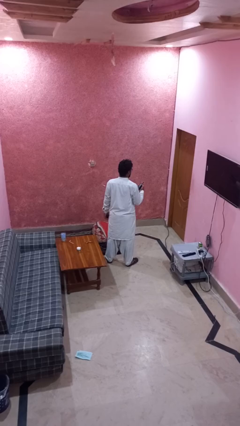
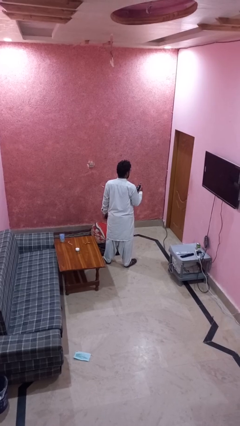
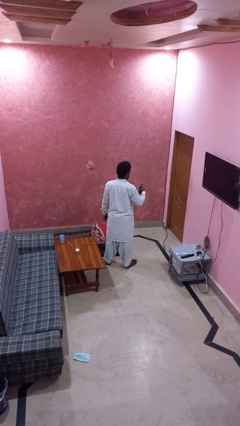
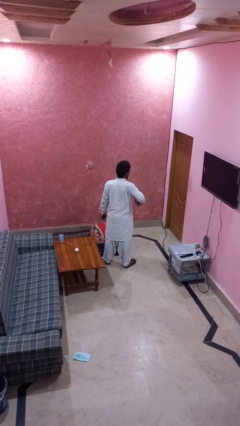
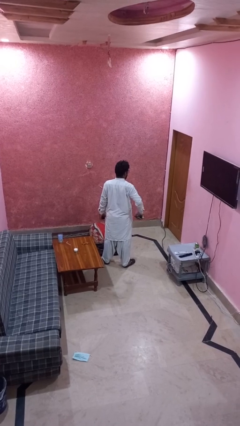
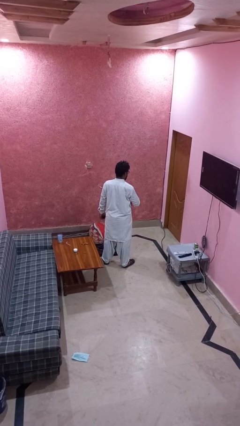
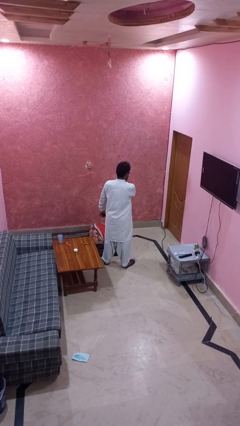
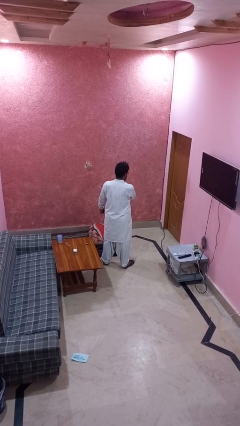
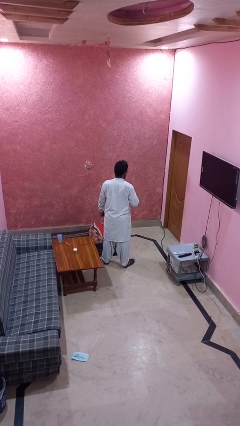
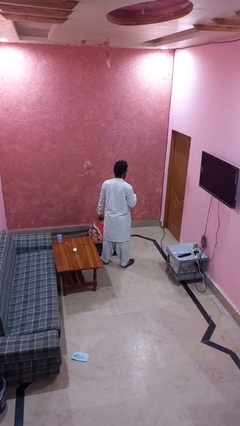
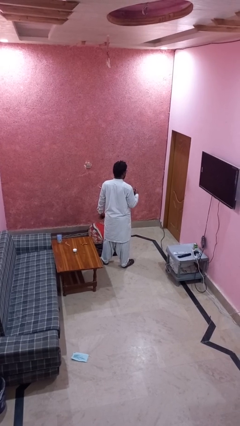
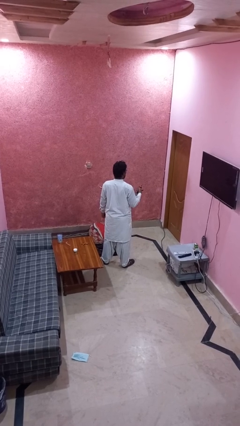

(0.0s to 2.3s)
person applies deodorant

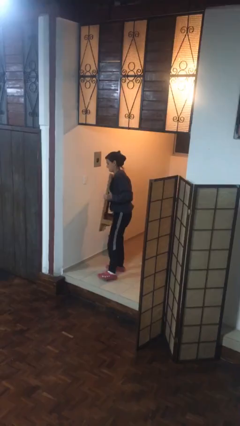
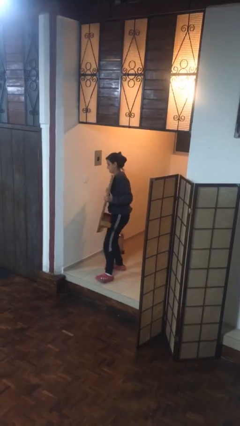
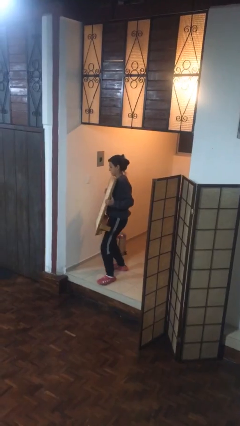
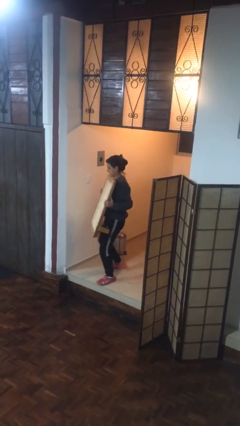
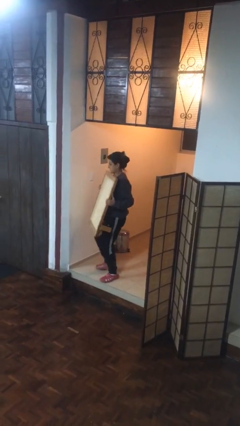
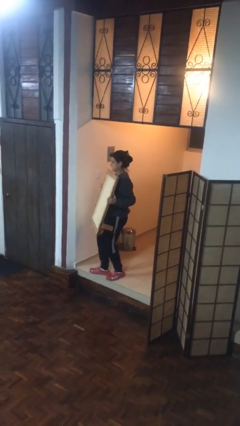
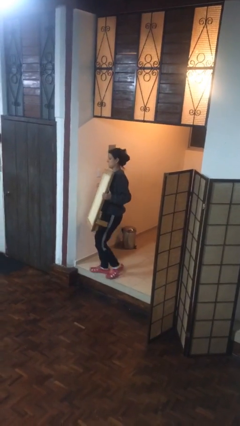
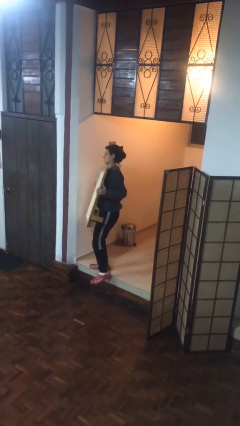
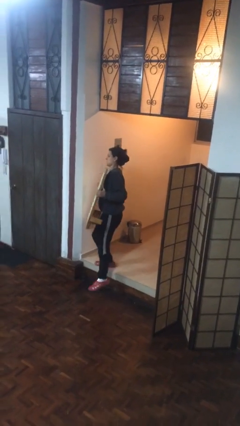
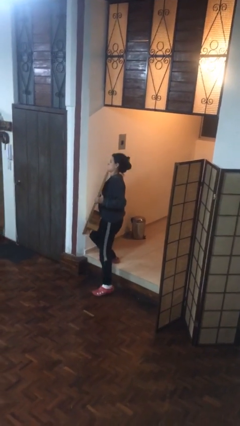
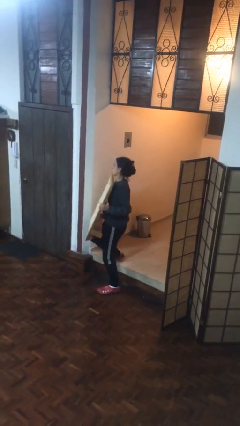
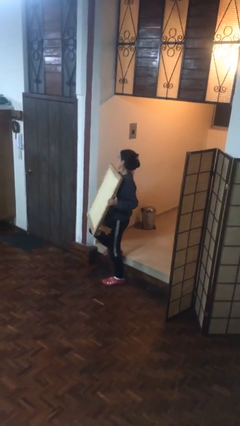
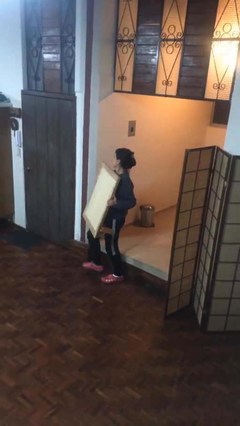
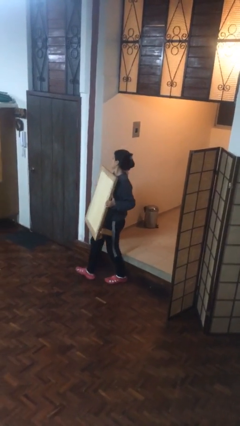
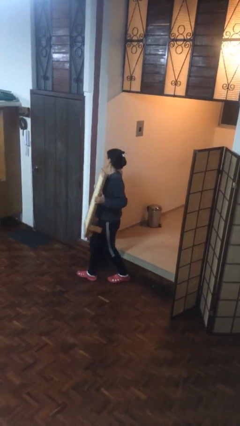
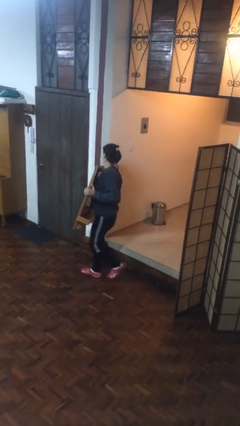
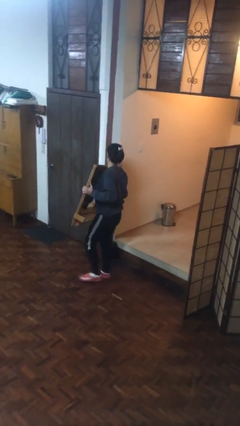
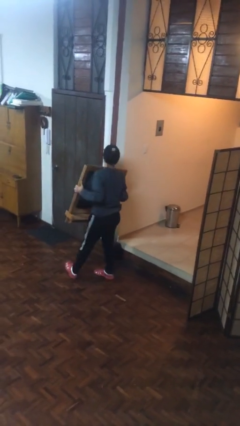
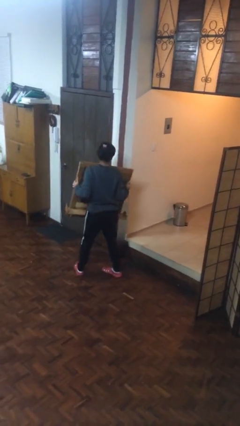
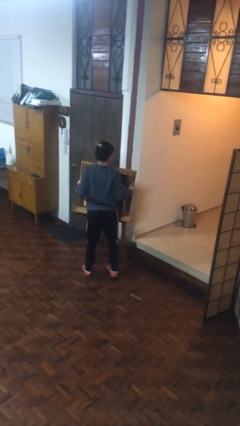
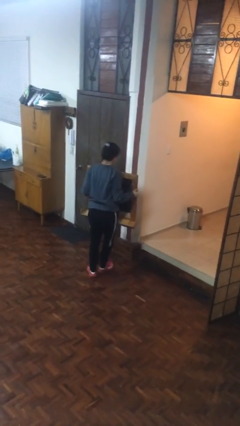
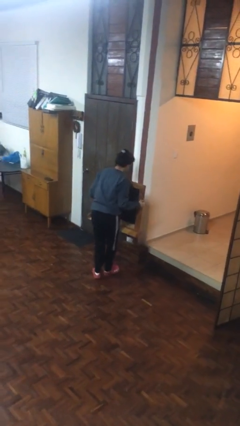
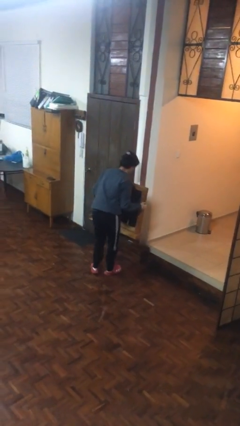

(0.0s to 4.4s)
person carries heavy object

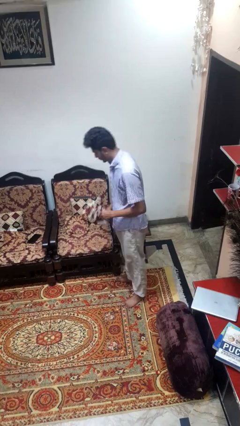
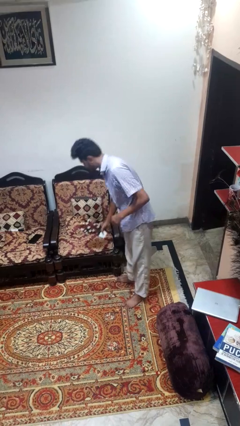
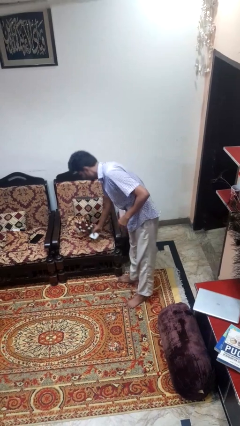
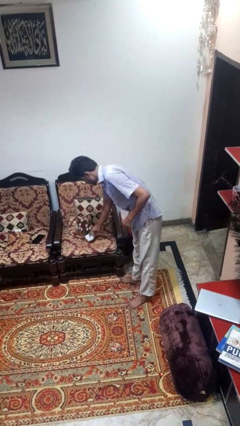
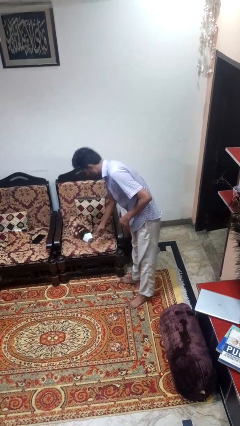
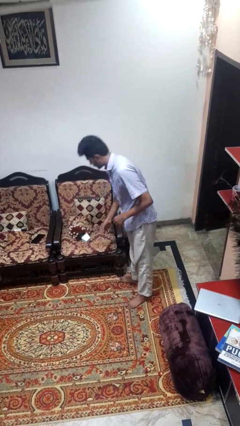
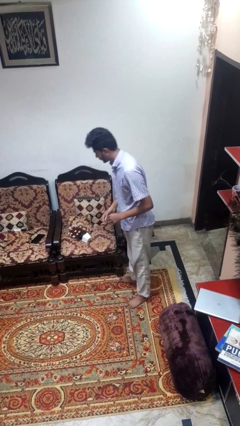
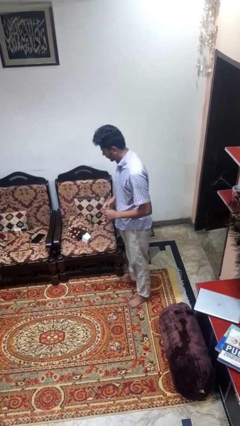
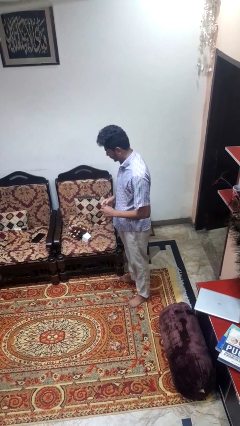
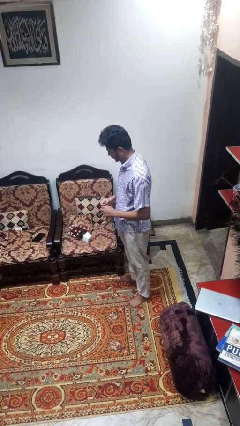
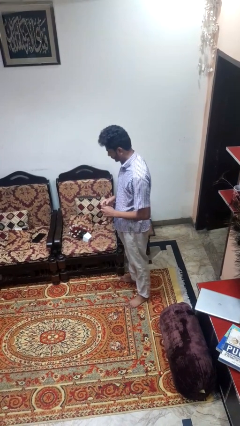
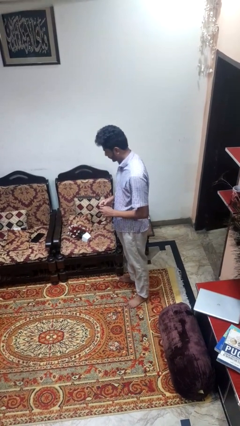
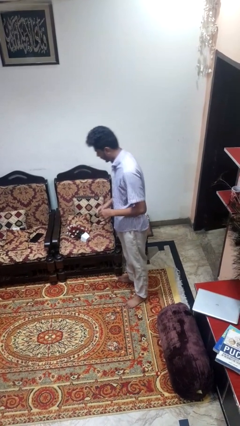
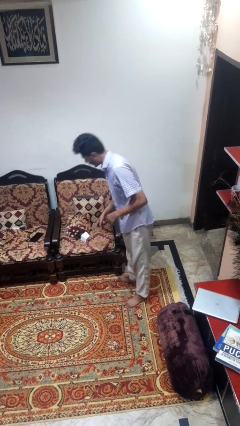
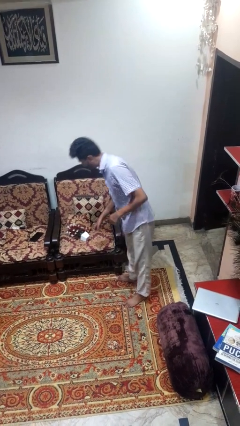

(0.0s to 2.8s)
person puts down object on couch

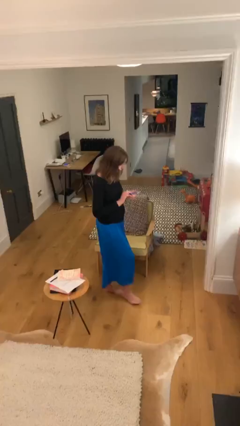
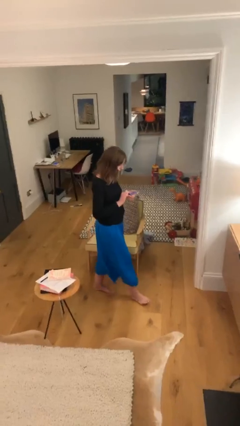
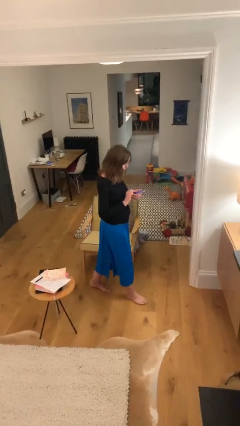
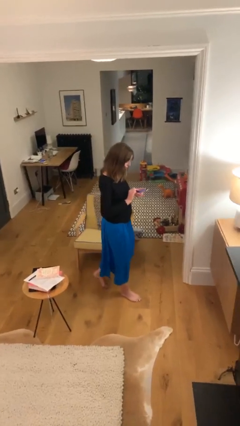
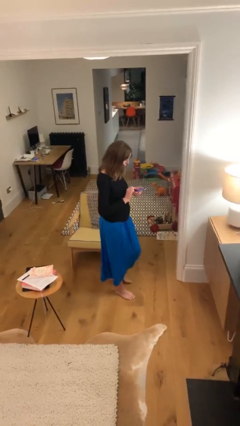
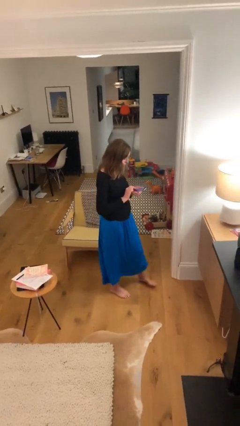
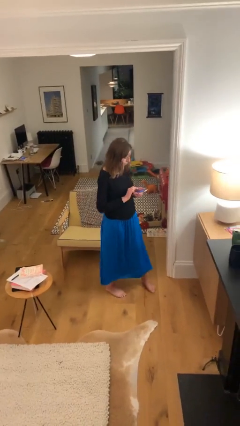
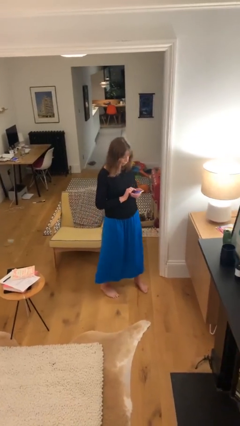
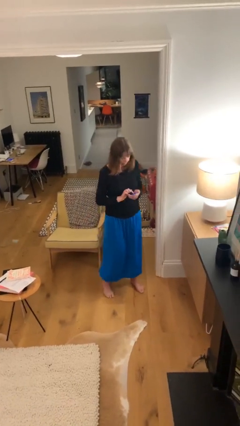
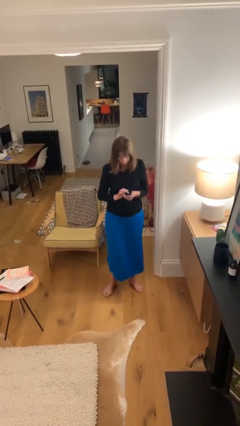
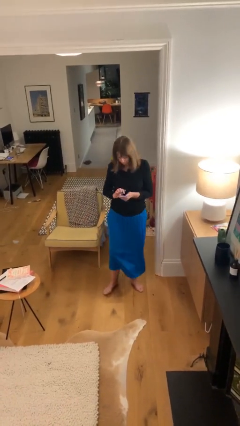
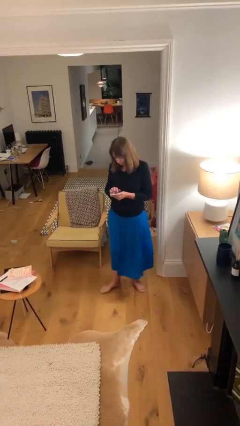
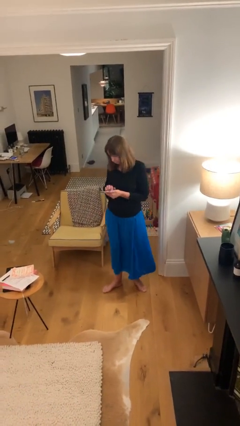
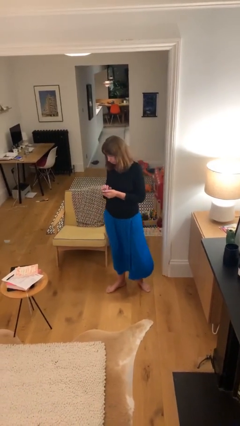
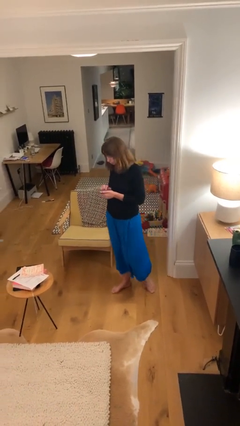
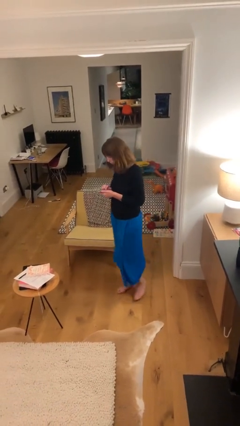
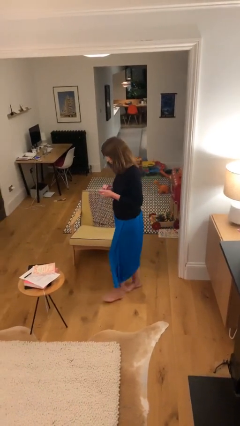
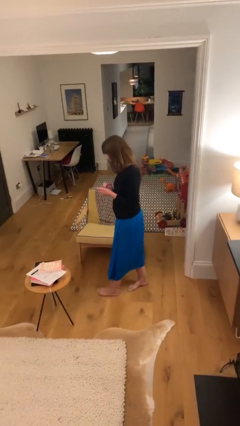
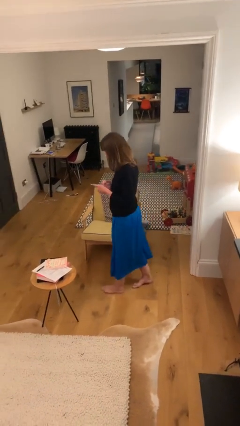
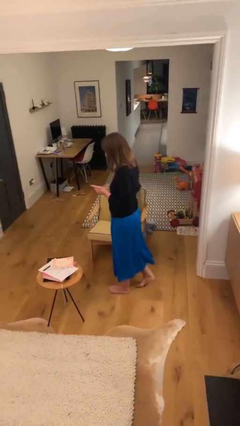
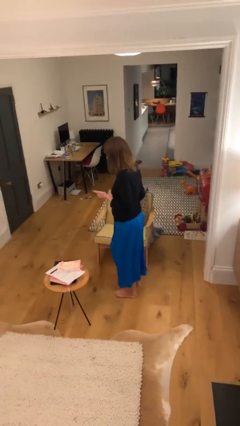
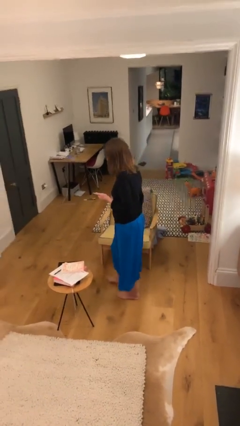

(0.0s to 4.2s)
person texts on phone

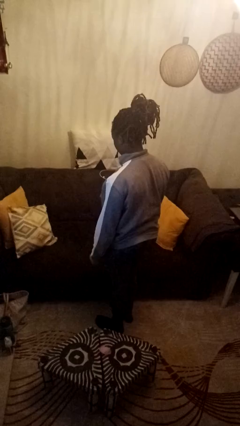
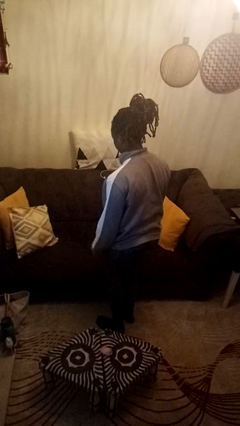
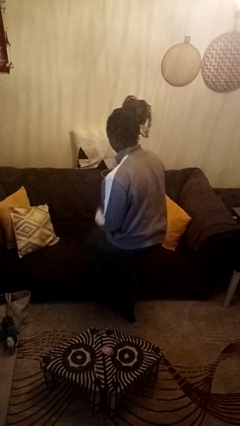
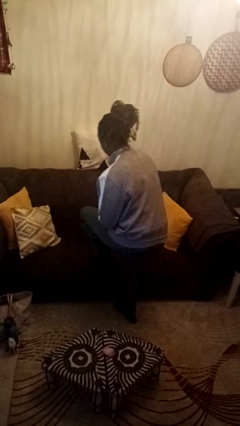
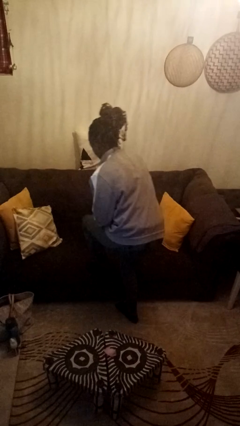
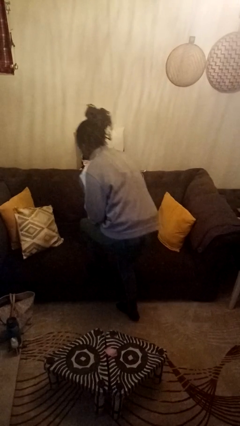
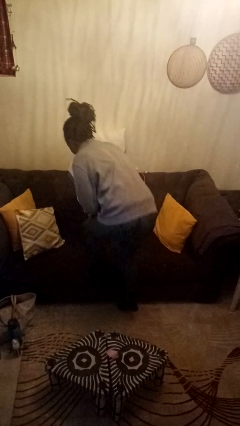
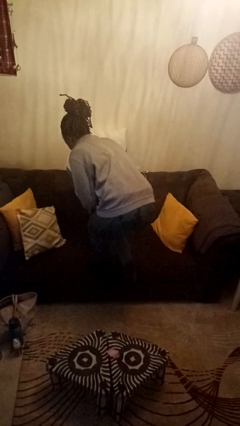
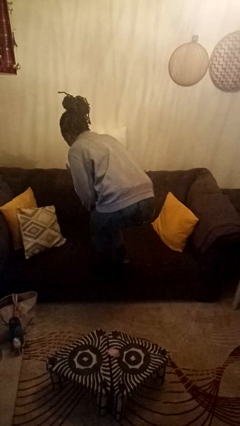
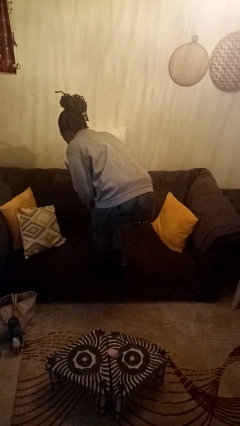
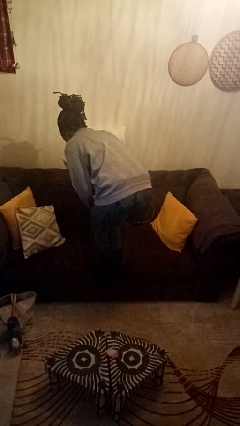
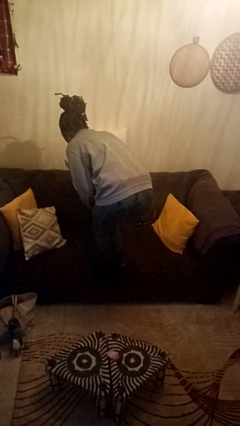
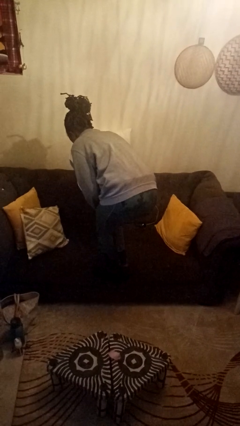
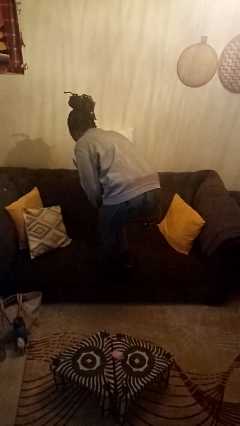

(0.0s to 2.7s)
person climbs on couch

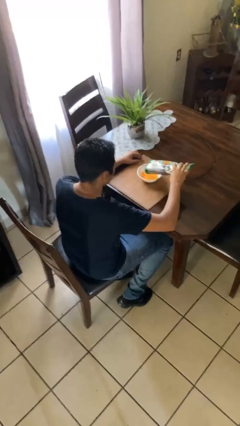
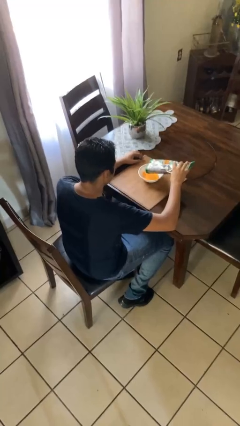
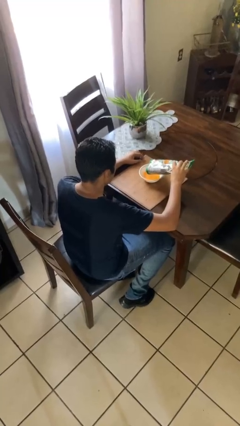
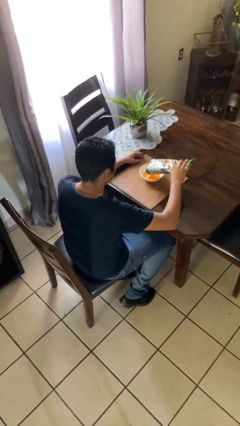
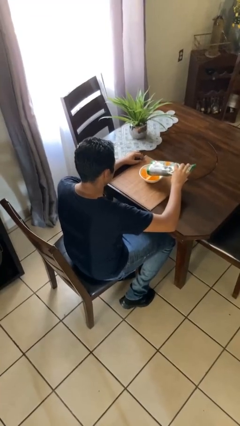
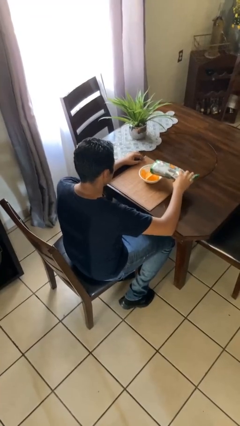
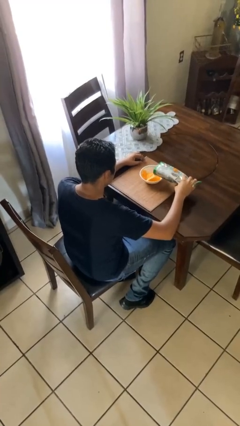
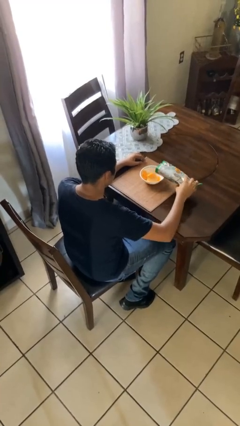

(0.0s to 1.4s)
person pours into bowl
